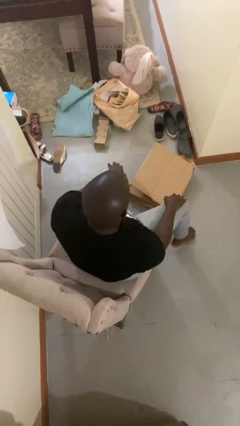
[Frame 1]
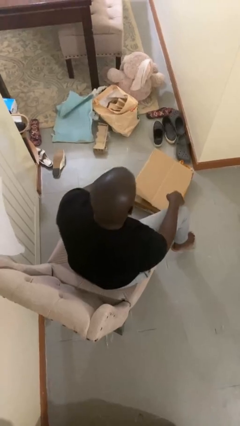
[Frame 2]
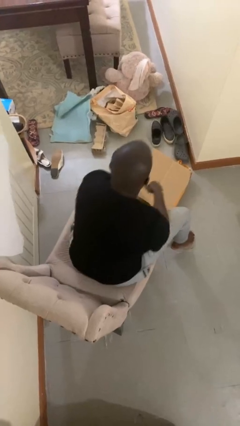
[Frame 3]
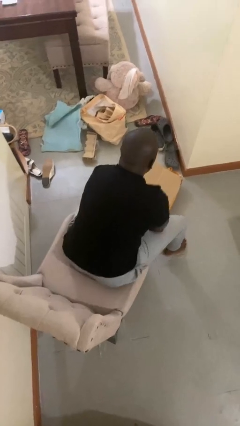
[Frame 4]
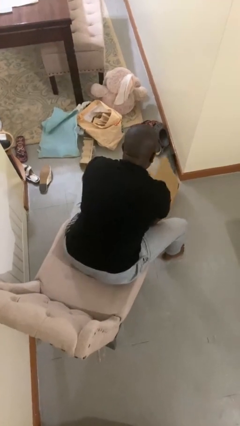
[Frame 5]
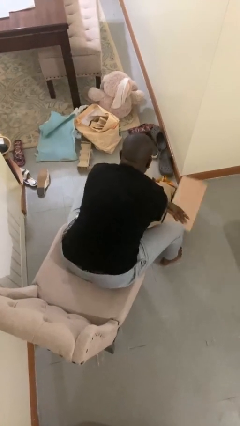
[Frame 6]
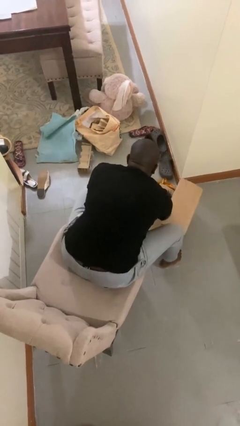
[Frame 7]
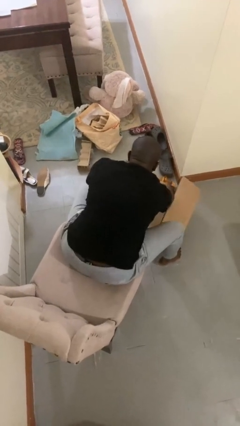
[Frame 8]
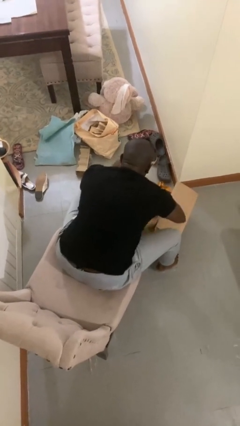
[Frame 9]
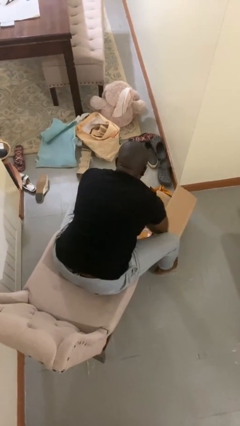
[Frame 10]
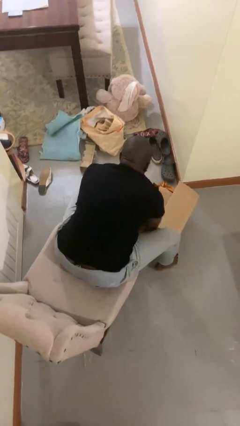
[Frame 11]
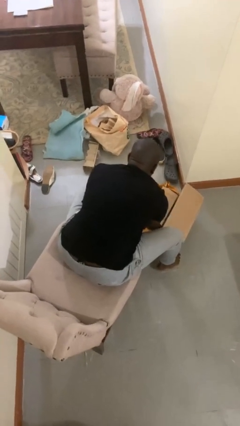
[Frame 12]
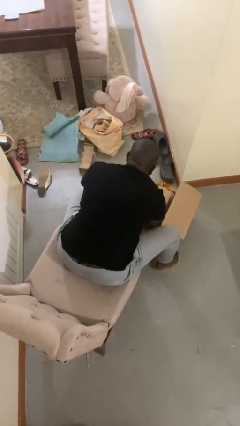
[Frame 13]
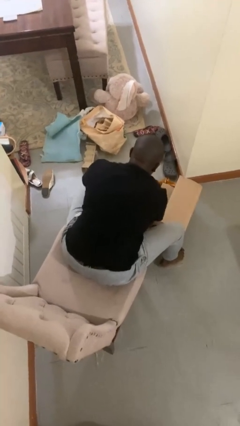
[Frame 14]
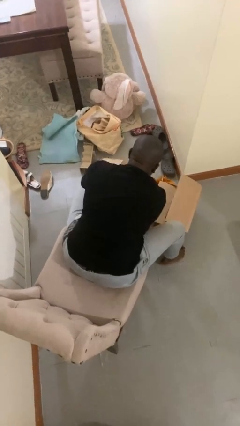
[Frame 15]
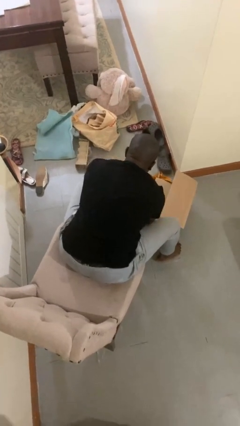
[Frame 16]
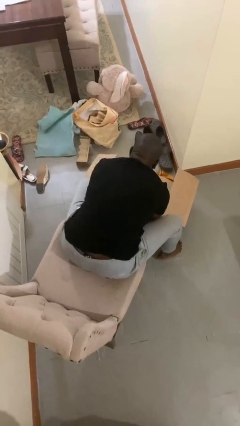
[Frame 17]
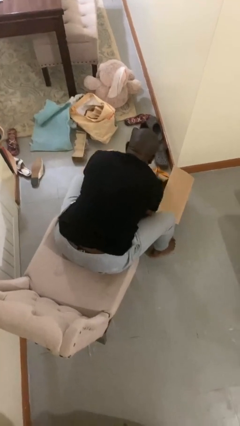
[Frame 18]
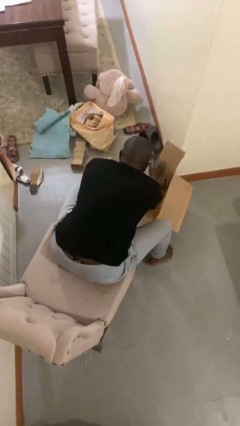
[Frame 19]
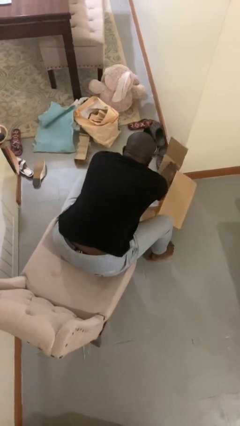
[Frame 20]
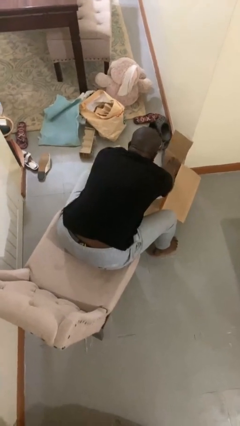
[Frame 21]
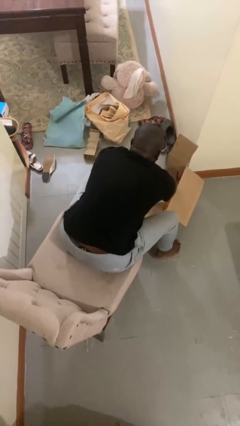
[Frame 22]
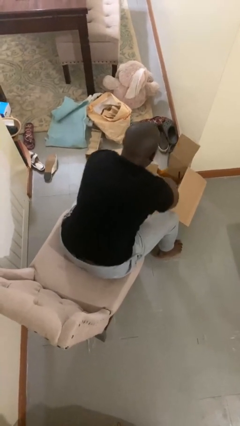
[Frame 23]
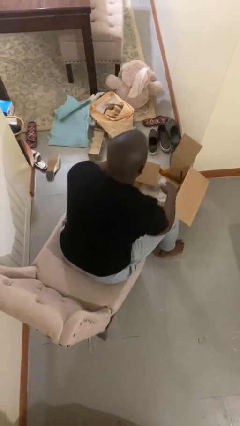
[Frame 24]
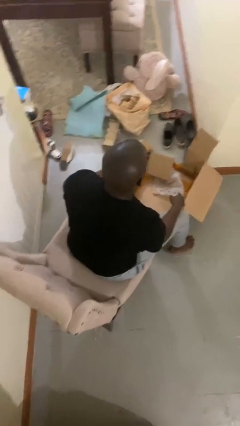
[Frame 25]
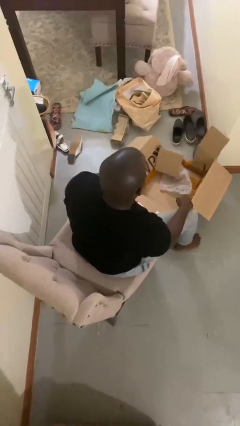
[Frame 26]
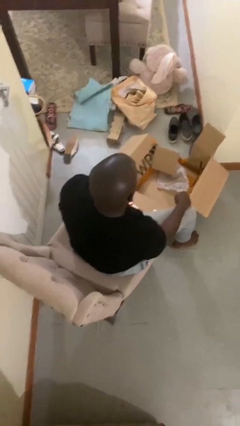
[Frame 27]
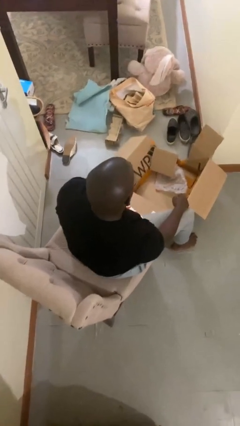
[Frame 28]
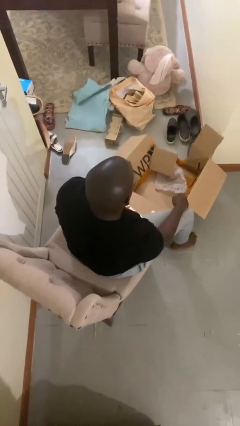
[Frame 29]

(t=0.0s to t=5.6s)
person opens box

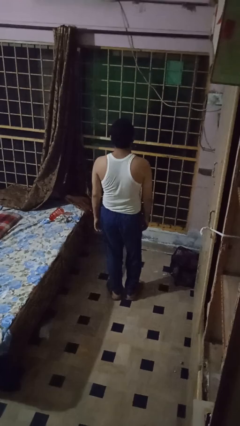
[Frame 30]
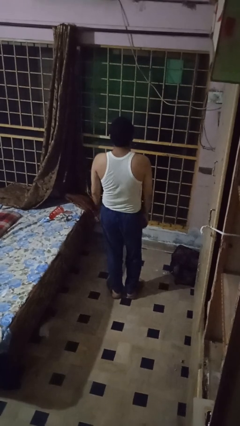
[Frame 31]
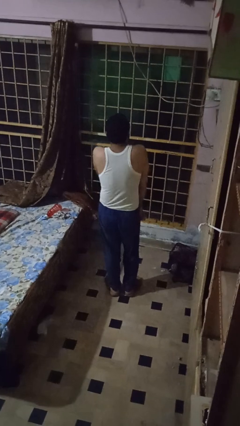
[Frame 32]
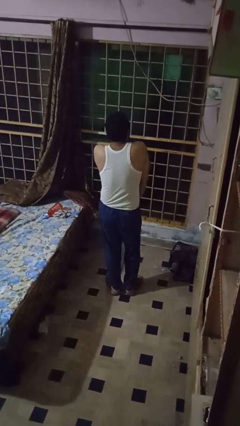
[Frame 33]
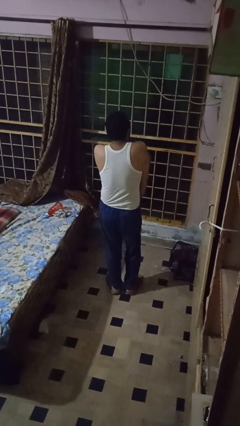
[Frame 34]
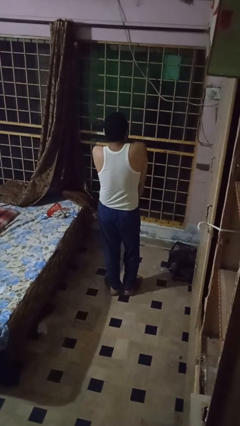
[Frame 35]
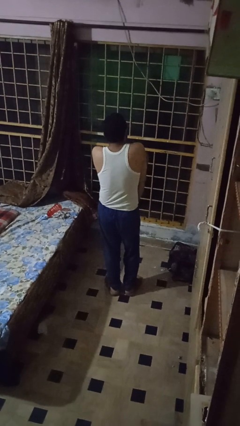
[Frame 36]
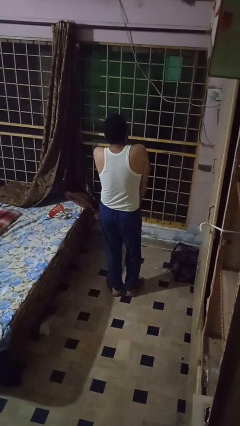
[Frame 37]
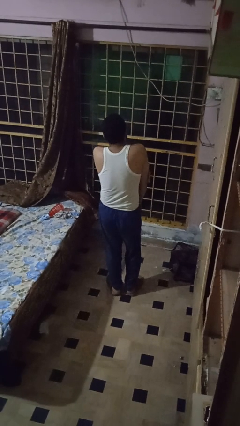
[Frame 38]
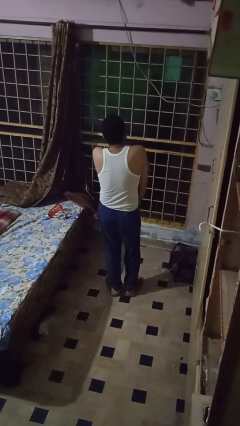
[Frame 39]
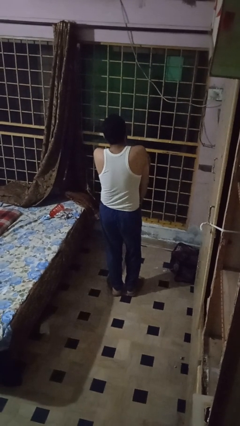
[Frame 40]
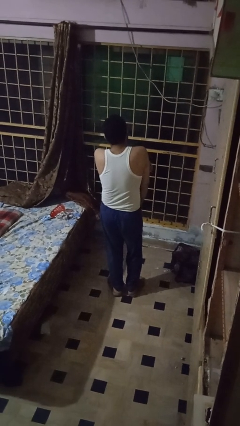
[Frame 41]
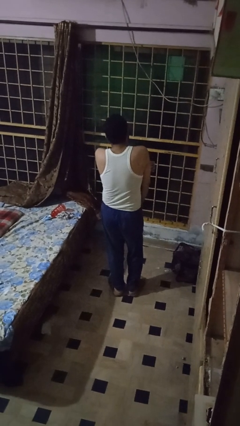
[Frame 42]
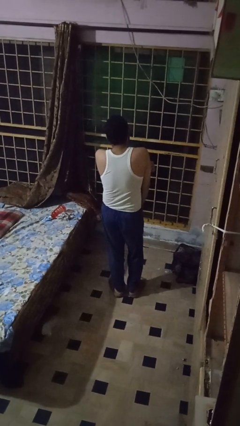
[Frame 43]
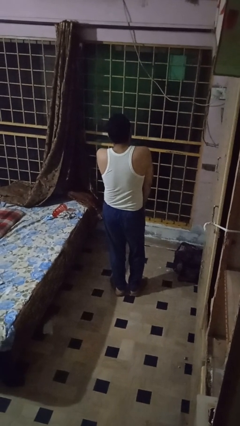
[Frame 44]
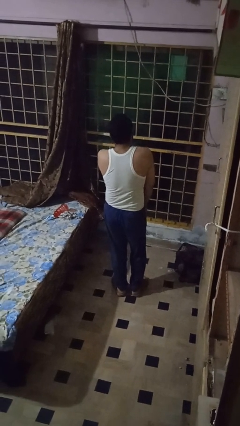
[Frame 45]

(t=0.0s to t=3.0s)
person swats bug

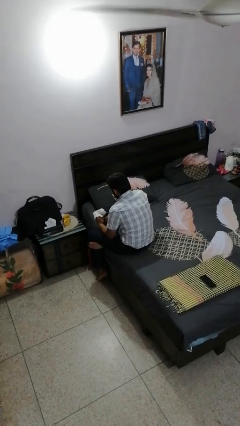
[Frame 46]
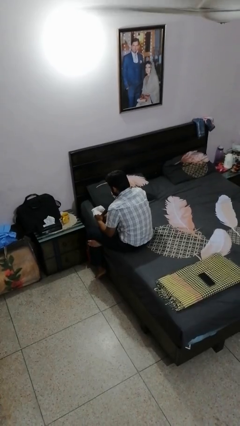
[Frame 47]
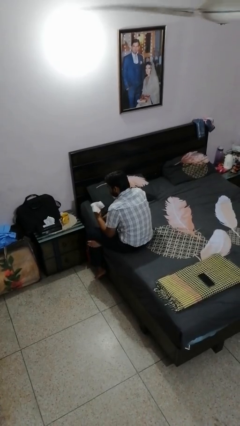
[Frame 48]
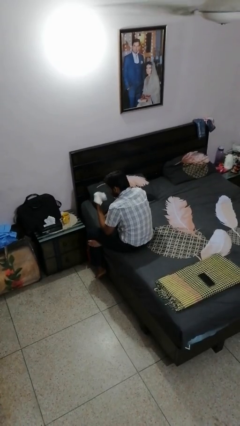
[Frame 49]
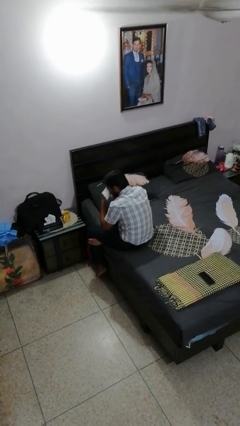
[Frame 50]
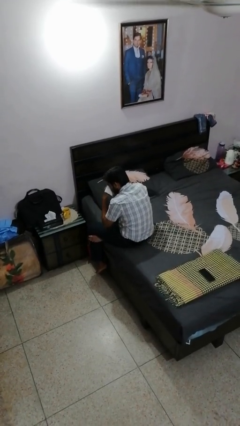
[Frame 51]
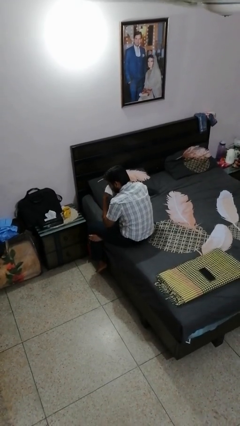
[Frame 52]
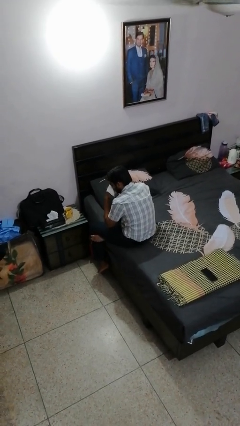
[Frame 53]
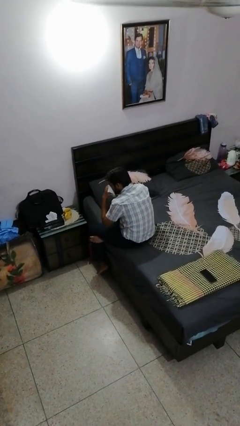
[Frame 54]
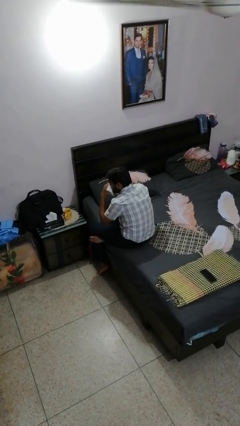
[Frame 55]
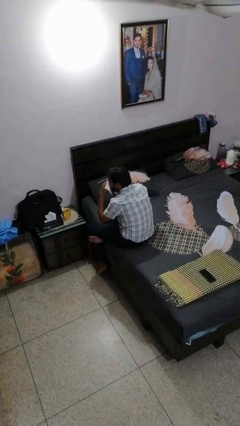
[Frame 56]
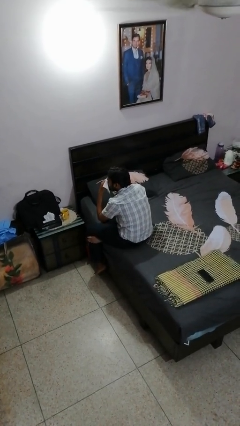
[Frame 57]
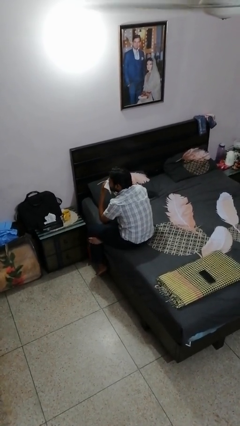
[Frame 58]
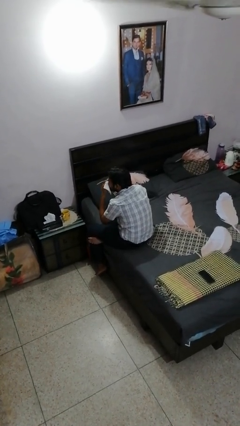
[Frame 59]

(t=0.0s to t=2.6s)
person blows nose

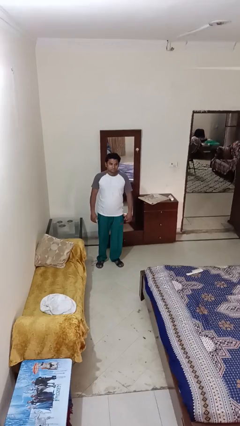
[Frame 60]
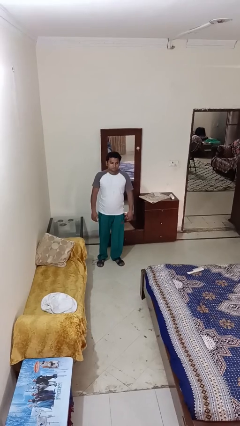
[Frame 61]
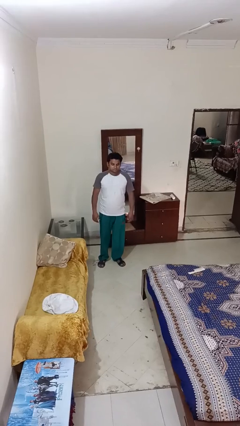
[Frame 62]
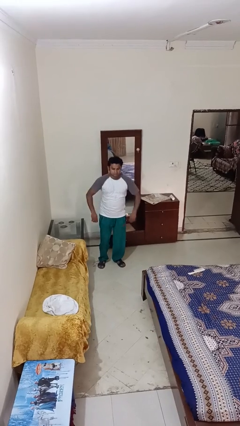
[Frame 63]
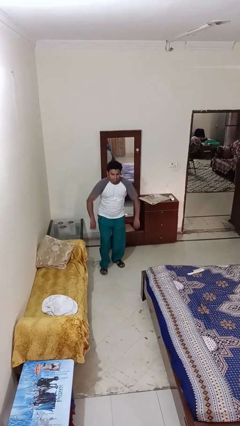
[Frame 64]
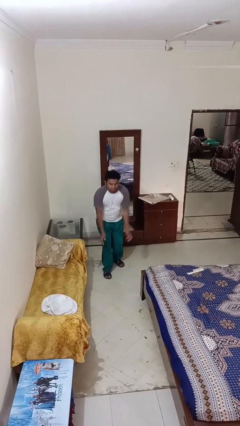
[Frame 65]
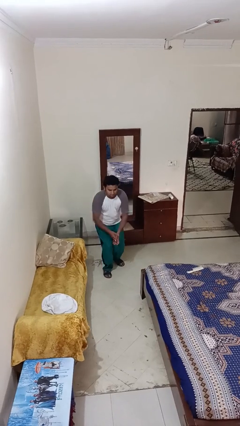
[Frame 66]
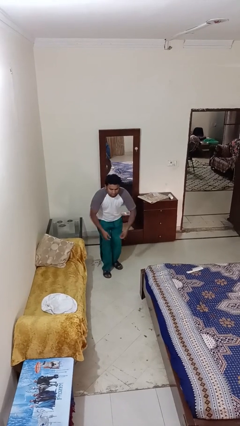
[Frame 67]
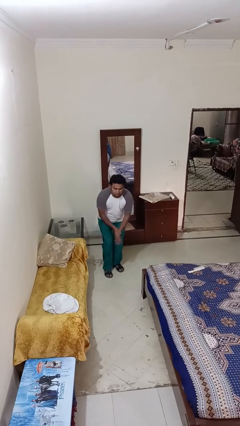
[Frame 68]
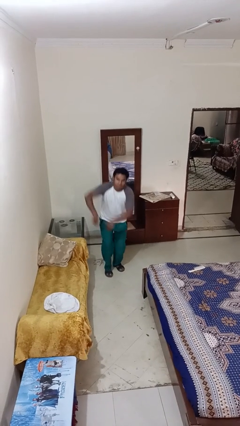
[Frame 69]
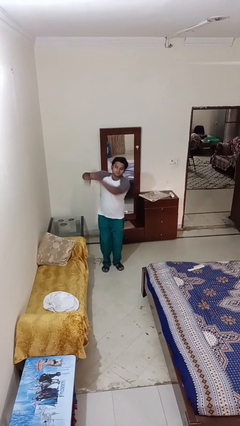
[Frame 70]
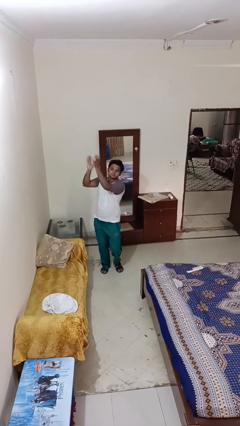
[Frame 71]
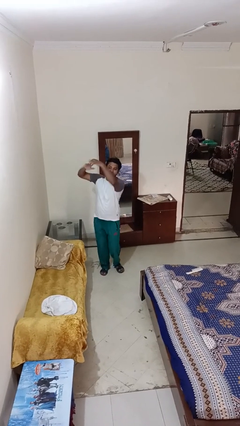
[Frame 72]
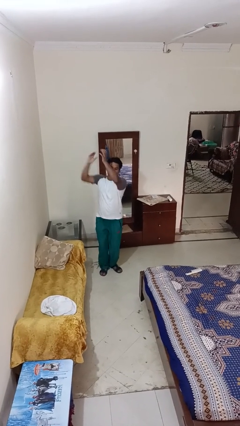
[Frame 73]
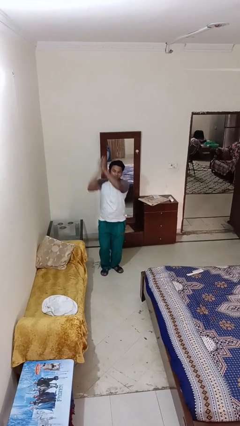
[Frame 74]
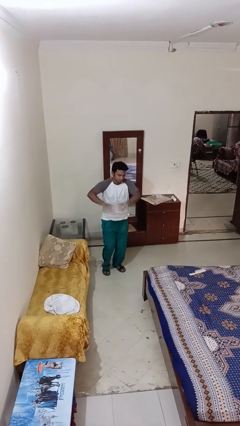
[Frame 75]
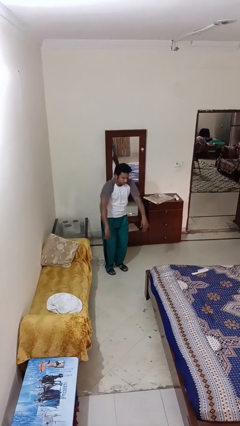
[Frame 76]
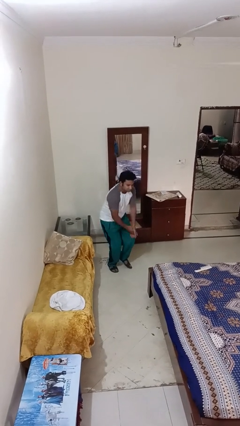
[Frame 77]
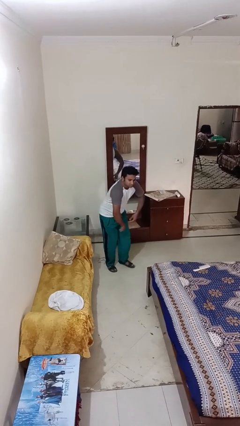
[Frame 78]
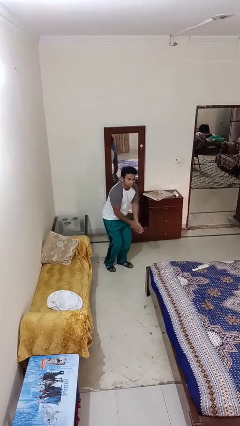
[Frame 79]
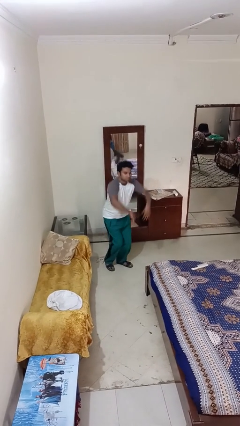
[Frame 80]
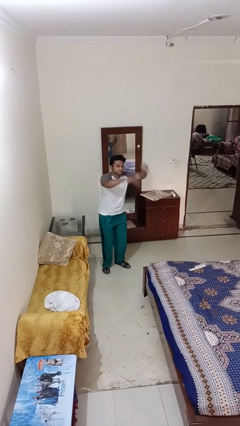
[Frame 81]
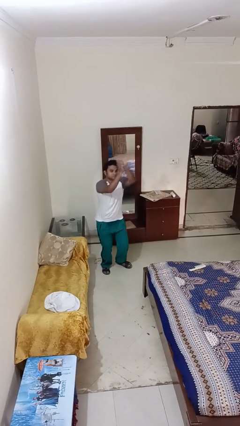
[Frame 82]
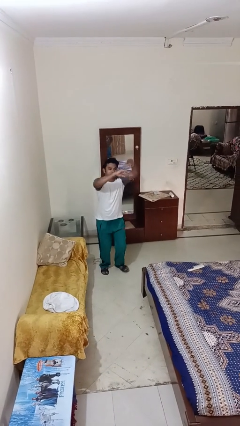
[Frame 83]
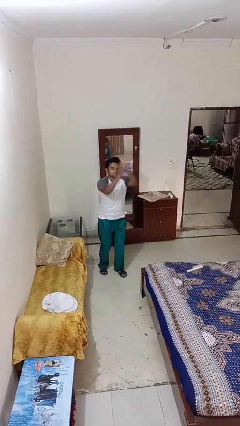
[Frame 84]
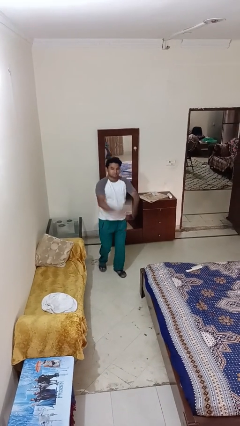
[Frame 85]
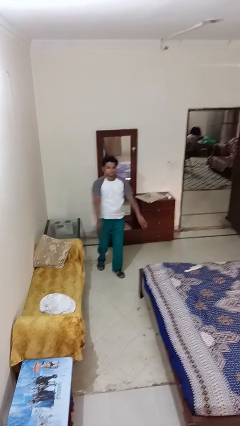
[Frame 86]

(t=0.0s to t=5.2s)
person dances in place

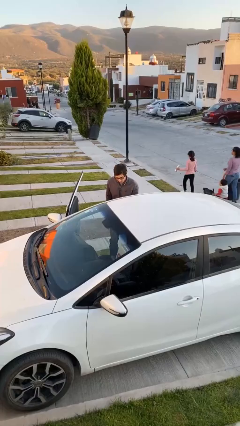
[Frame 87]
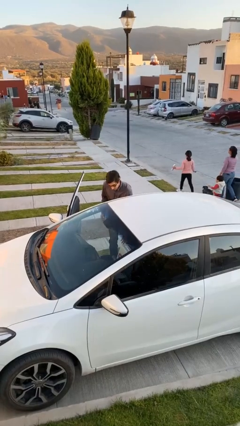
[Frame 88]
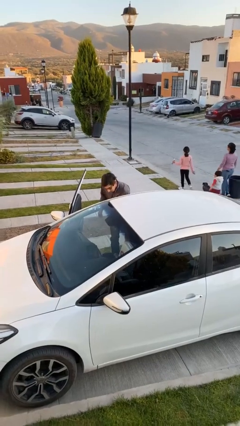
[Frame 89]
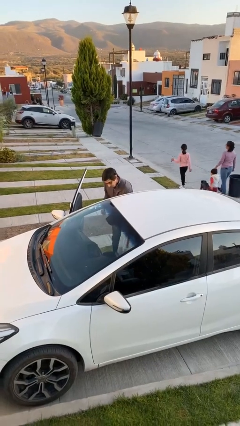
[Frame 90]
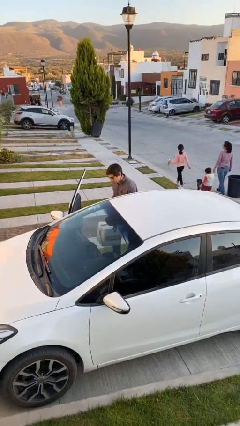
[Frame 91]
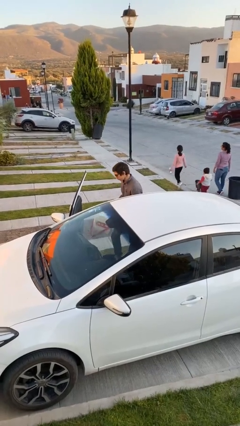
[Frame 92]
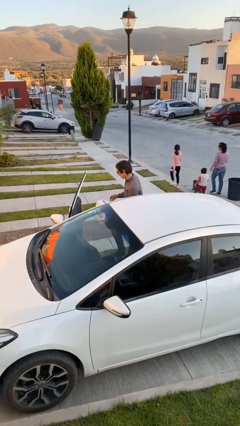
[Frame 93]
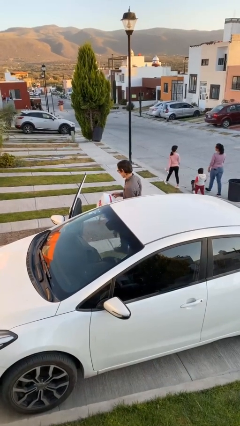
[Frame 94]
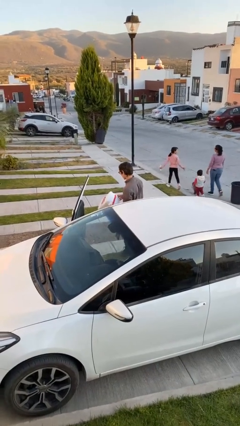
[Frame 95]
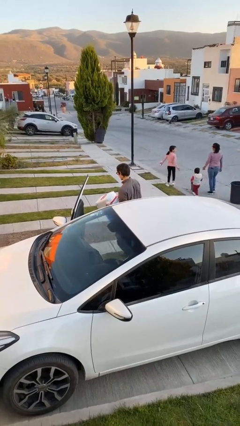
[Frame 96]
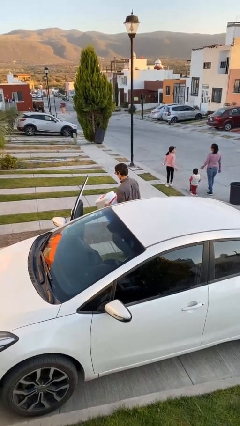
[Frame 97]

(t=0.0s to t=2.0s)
person unloads car
